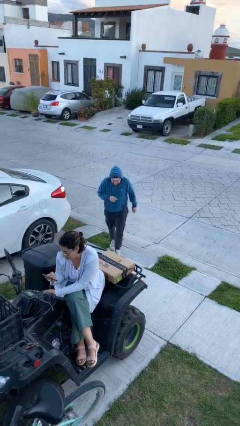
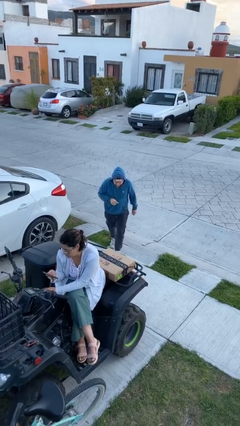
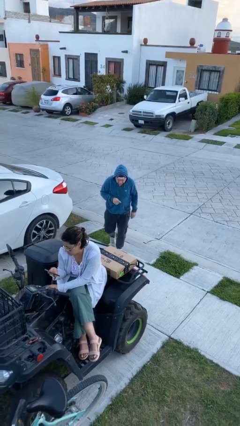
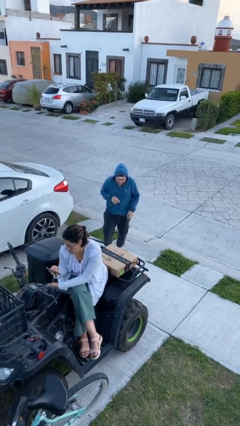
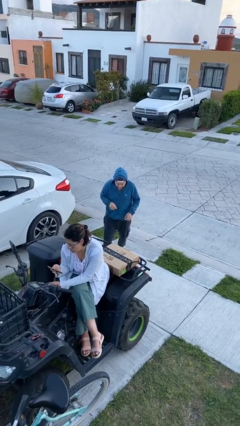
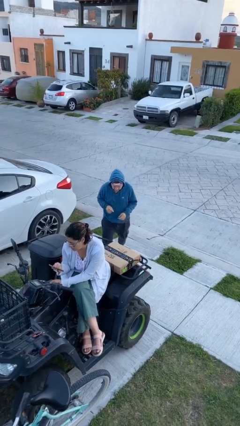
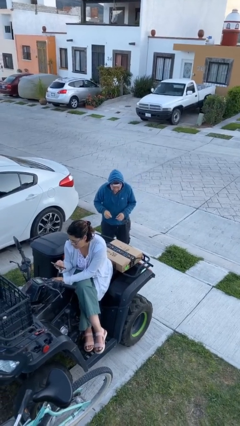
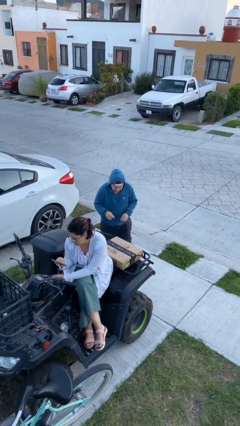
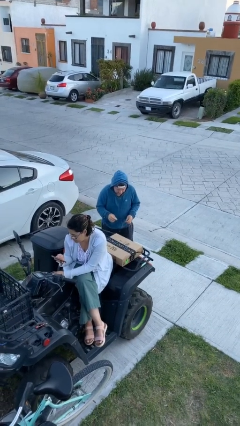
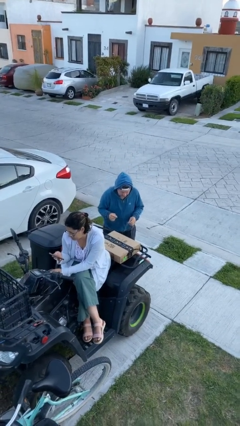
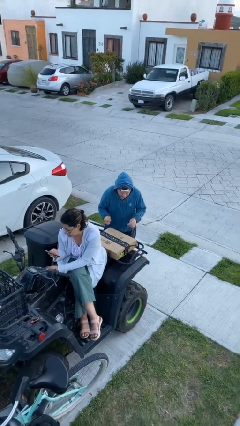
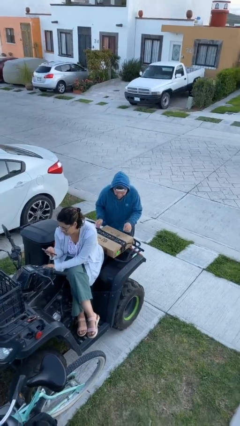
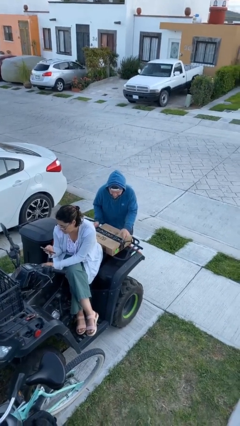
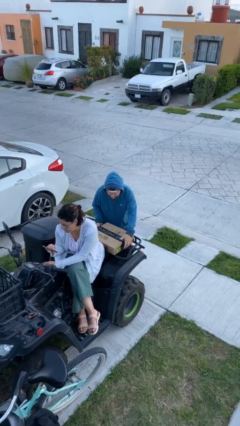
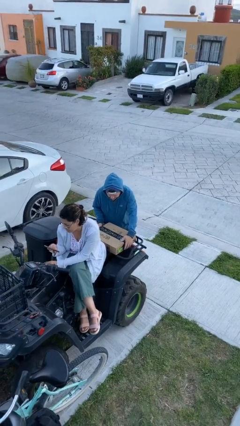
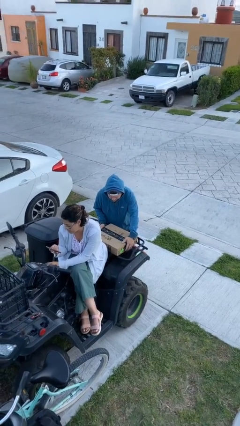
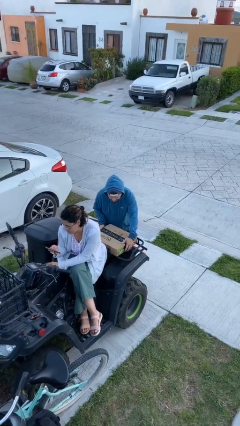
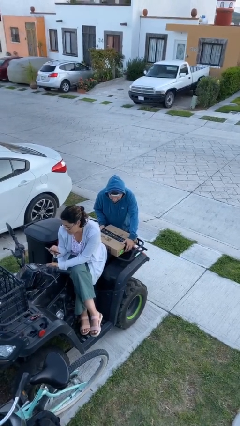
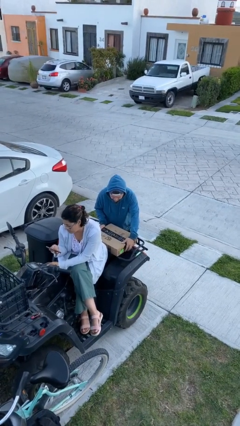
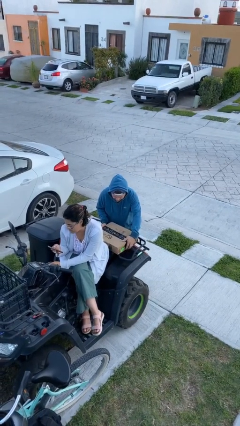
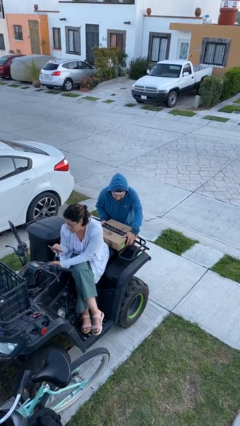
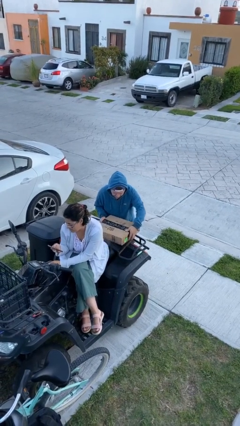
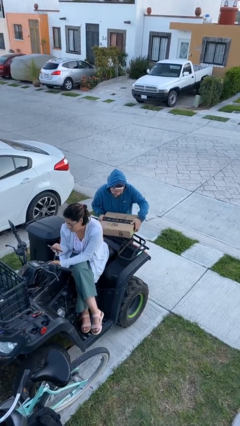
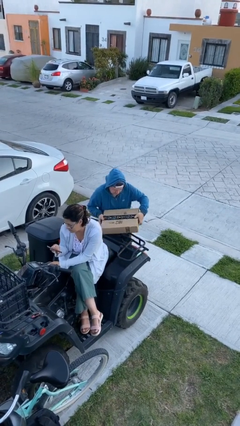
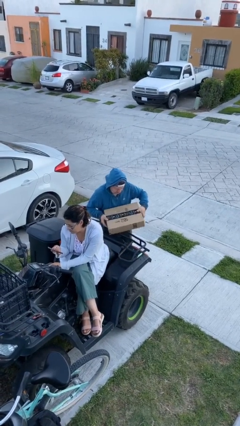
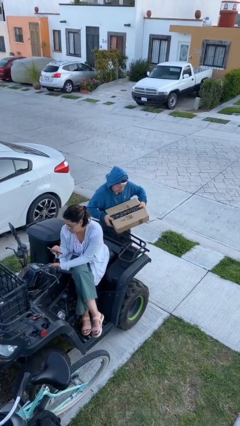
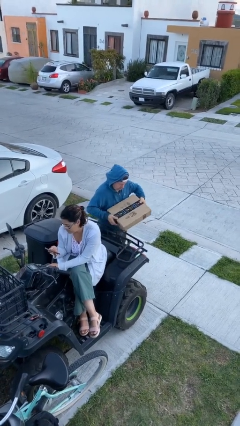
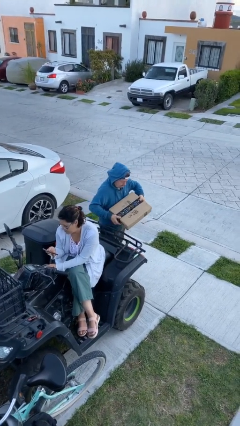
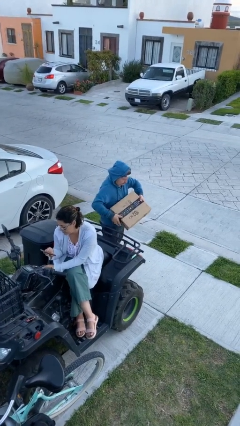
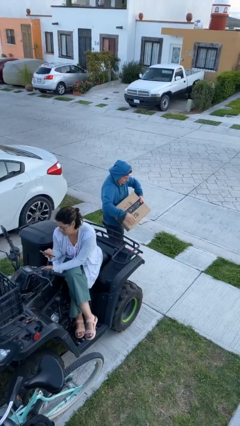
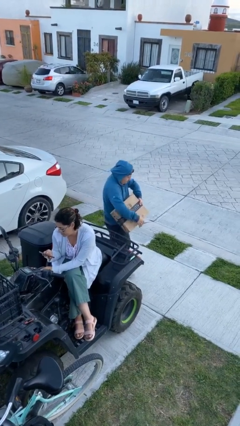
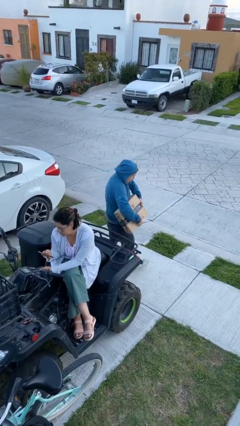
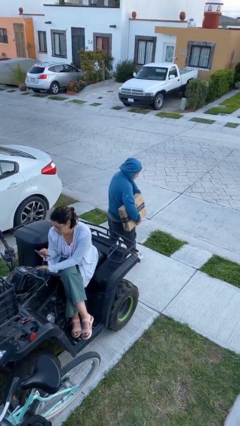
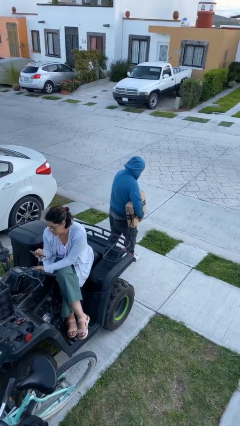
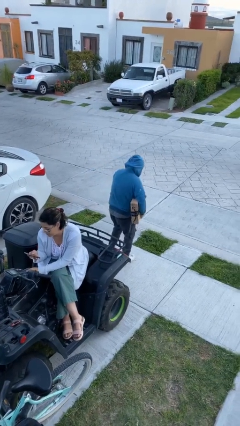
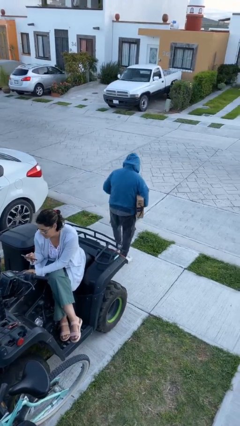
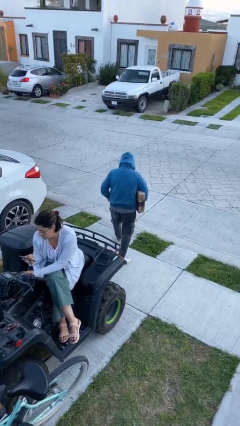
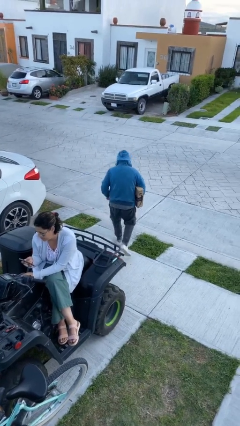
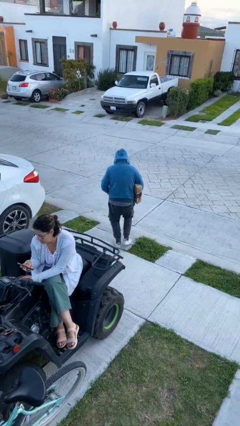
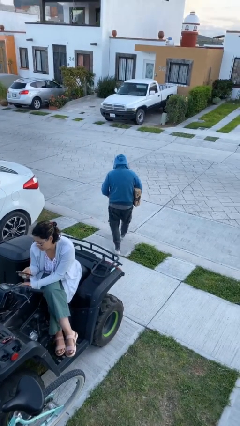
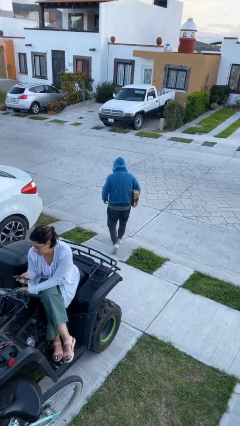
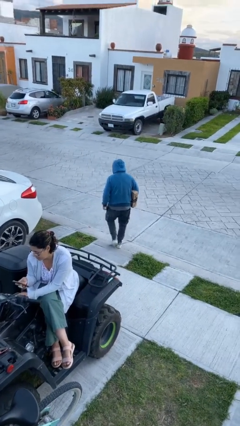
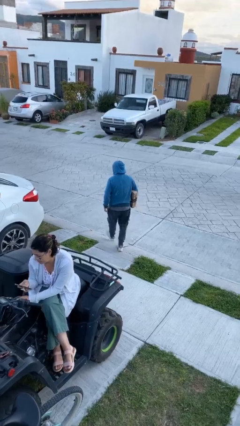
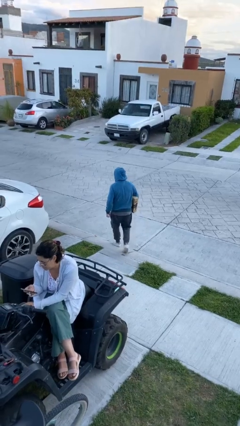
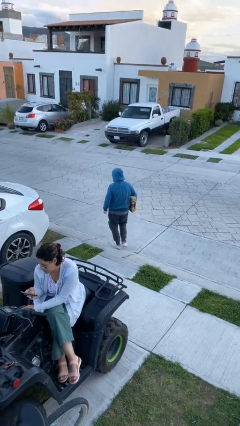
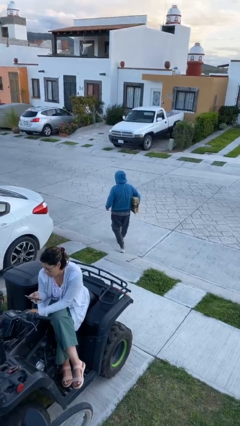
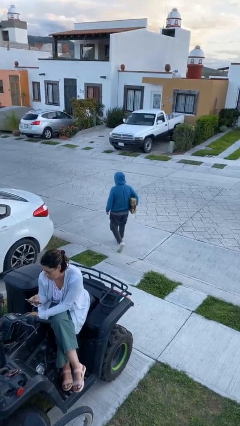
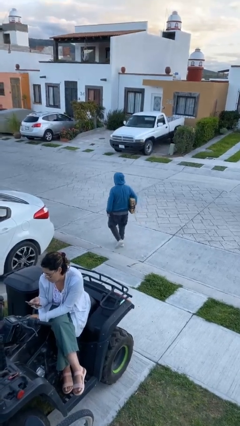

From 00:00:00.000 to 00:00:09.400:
person steals object from person

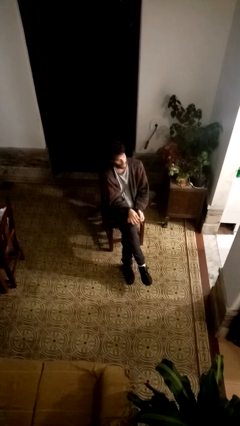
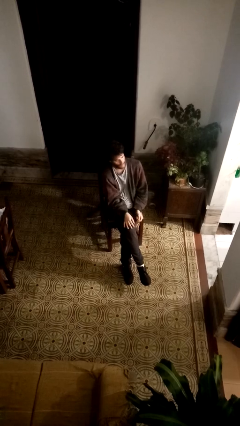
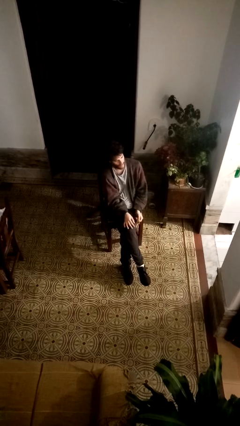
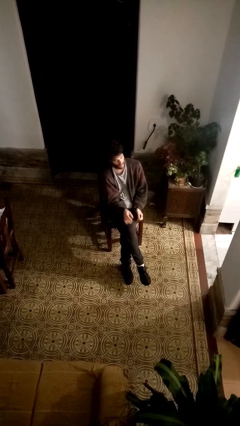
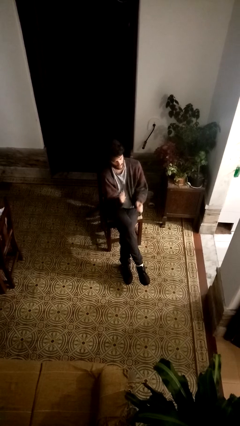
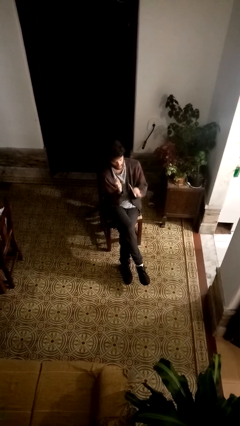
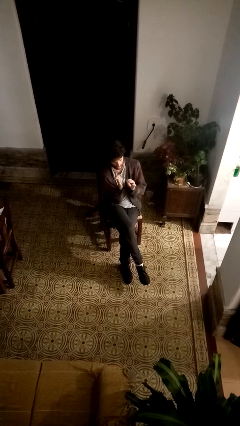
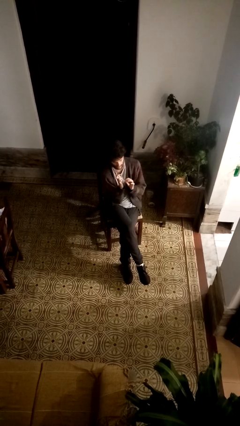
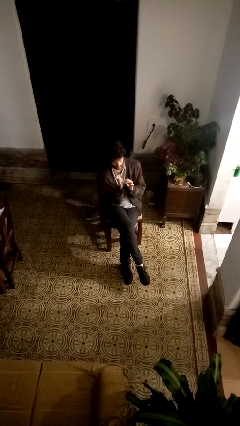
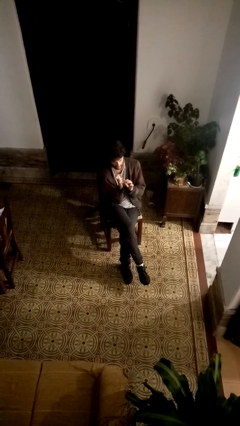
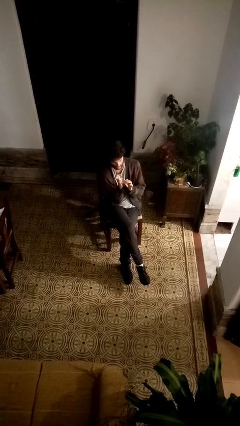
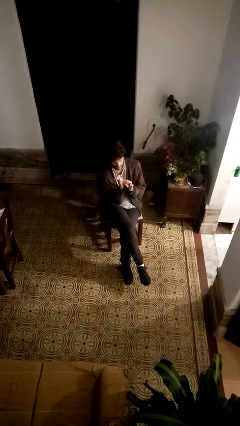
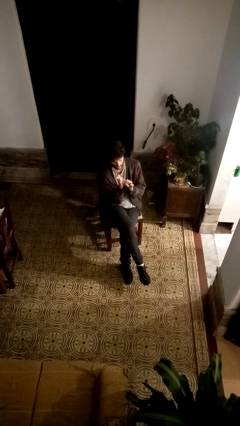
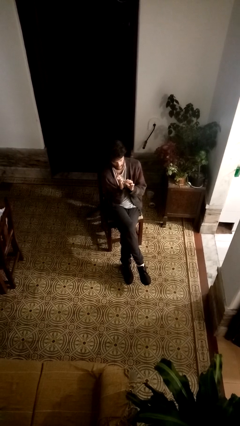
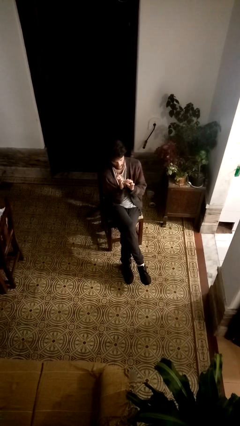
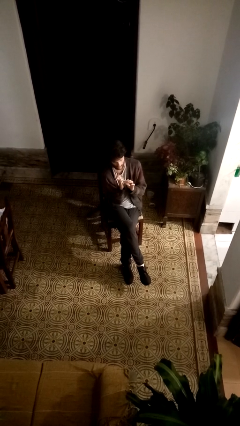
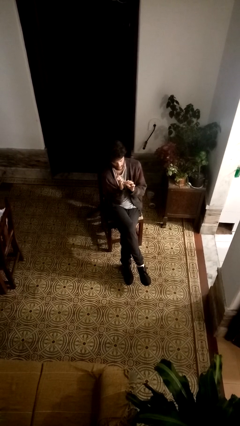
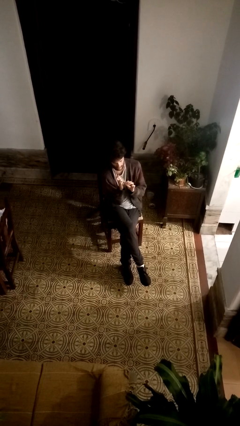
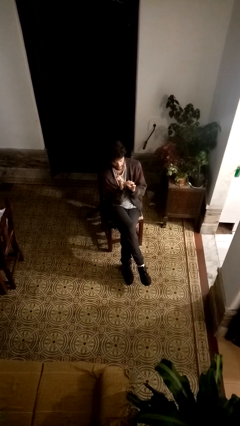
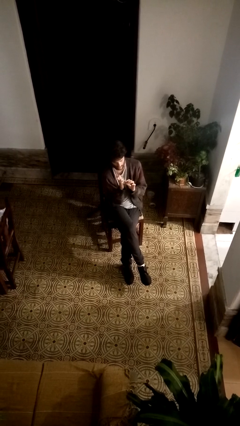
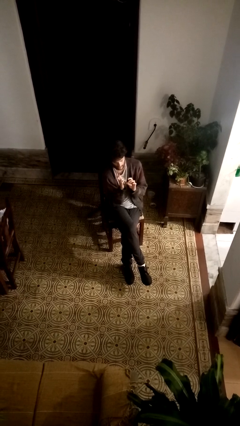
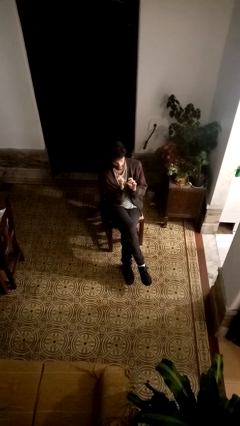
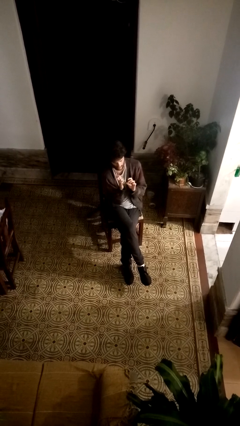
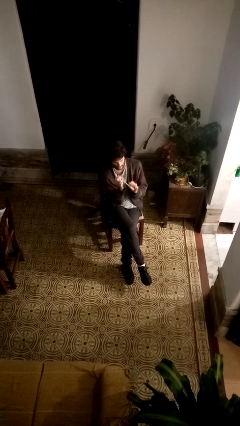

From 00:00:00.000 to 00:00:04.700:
person files fingernails

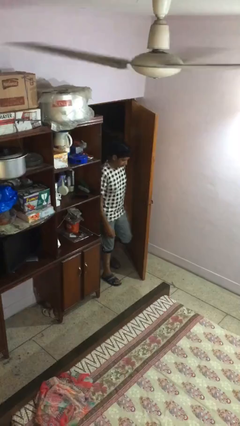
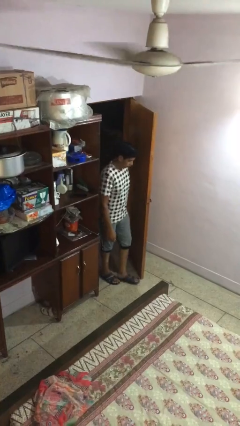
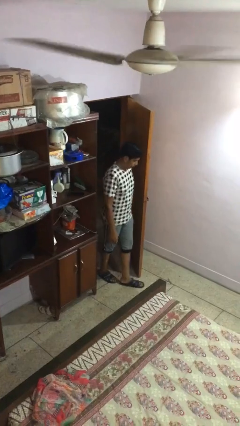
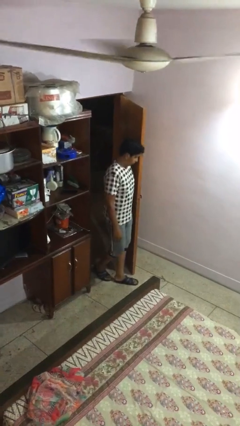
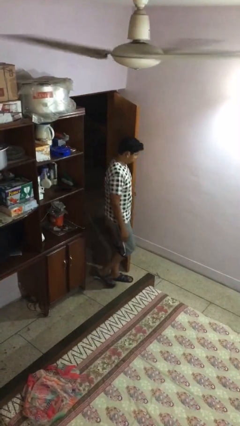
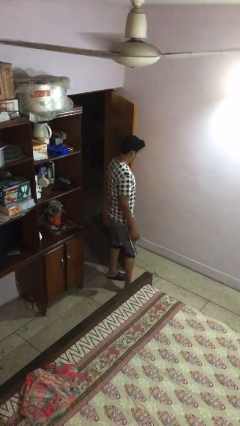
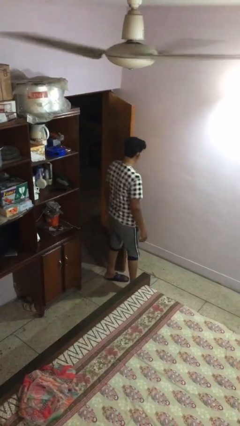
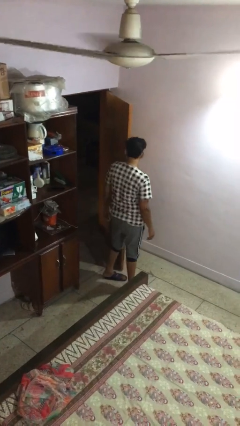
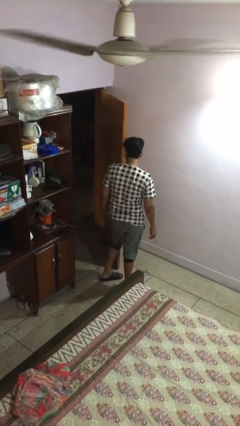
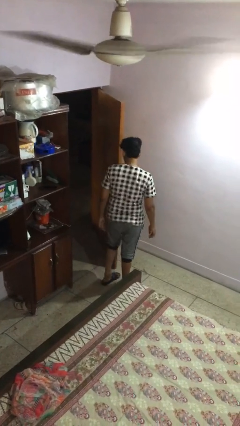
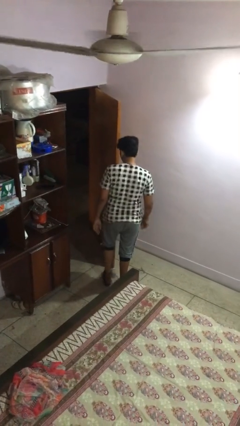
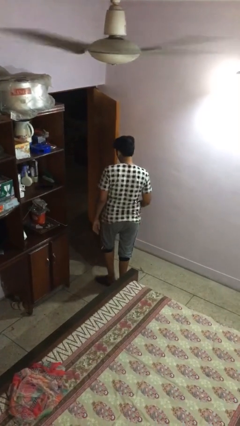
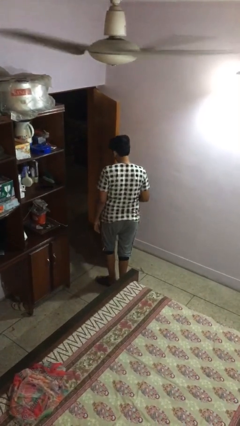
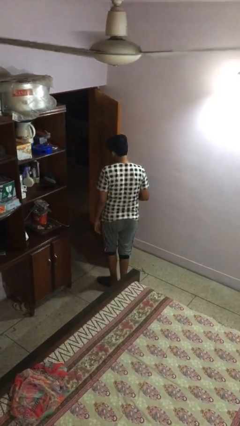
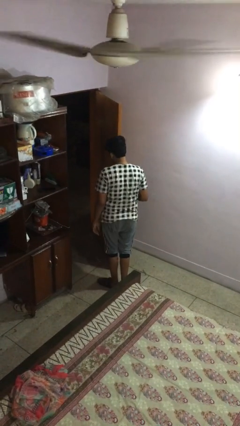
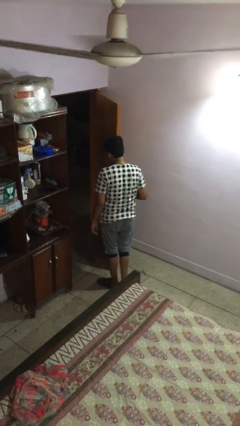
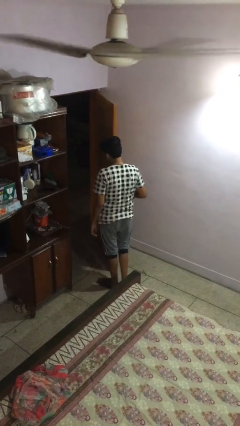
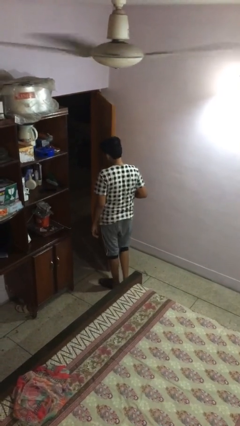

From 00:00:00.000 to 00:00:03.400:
person enters scene through structure

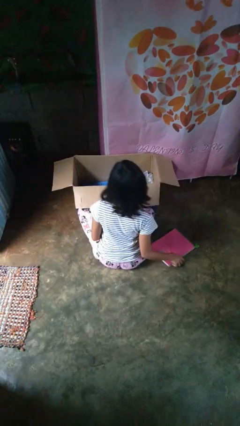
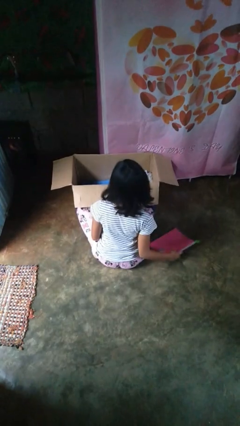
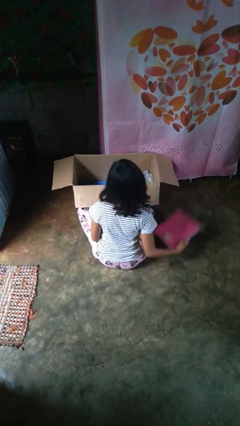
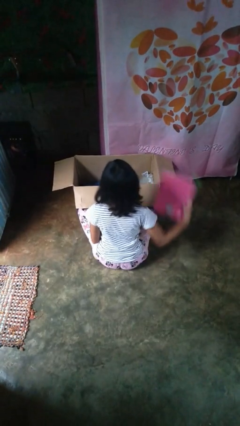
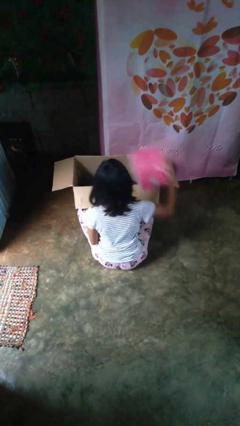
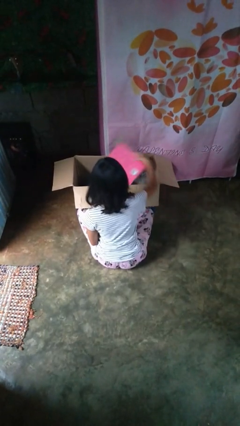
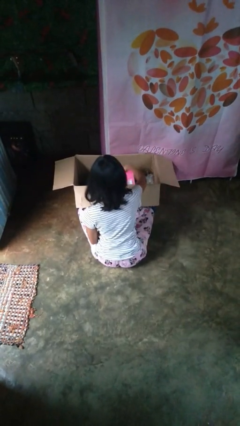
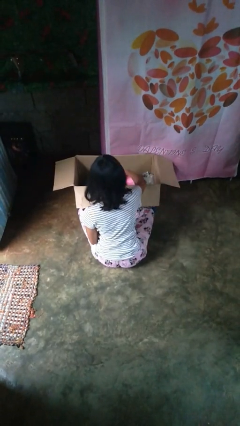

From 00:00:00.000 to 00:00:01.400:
person puts object into box
